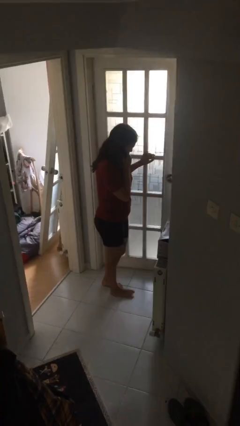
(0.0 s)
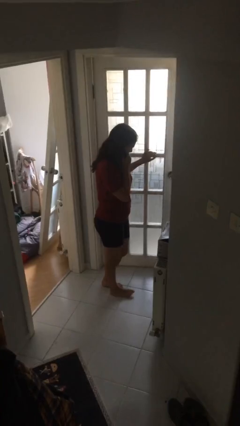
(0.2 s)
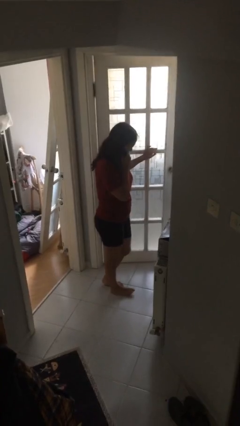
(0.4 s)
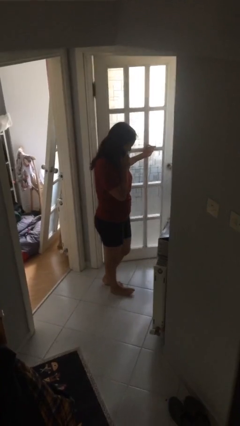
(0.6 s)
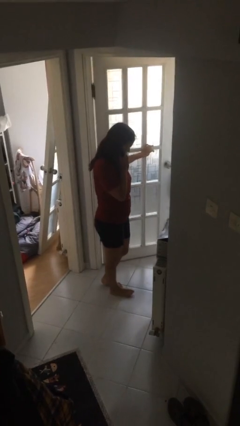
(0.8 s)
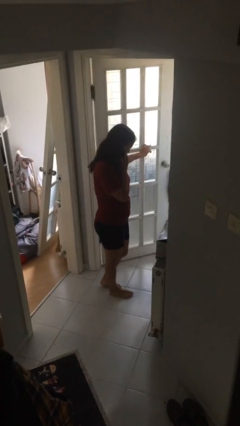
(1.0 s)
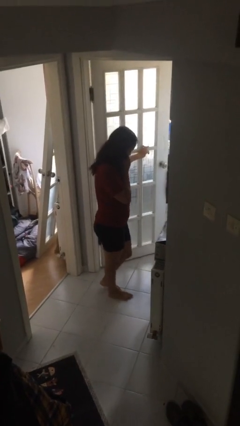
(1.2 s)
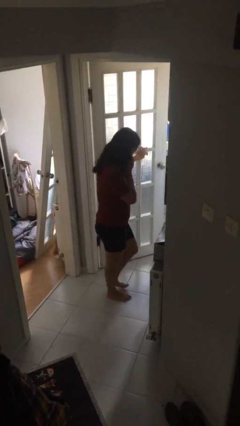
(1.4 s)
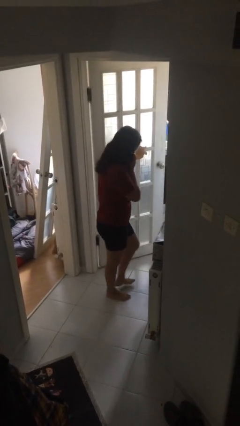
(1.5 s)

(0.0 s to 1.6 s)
person opens facility door

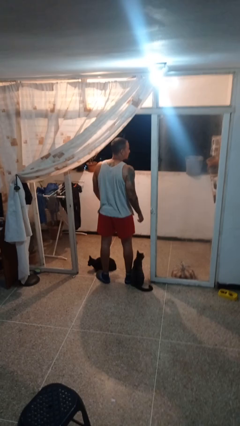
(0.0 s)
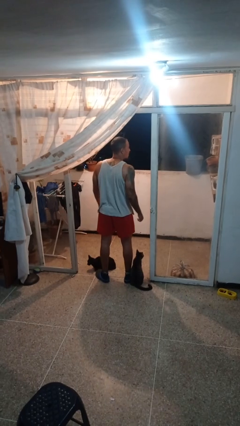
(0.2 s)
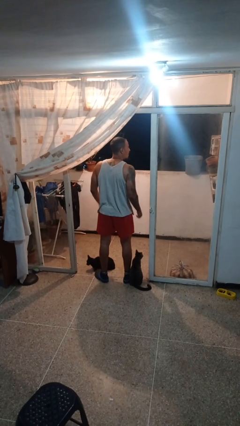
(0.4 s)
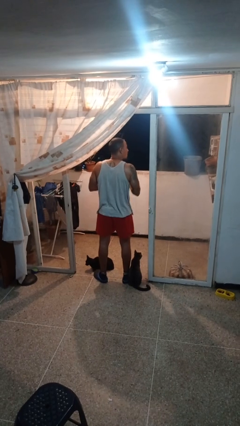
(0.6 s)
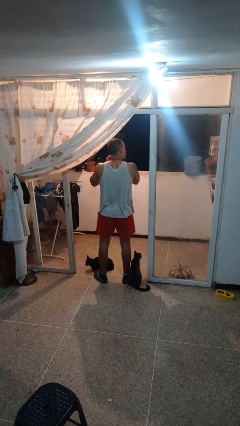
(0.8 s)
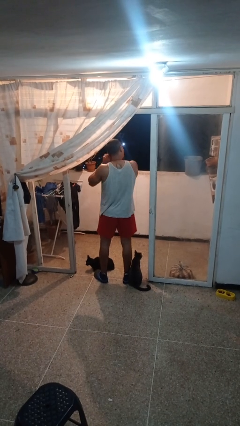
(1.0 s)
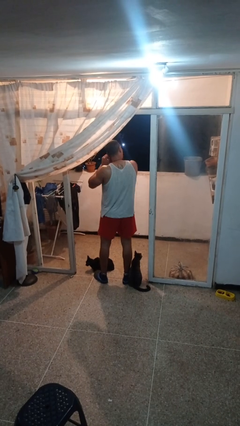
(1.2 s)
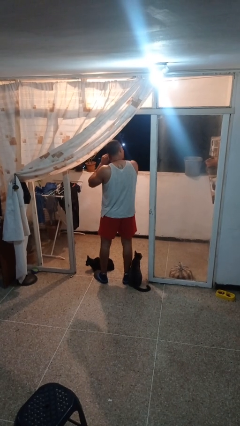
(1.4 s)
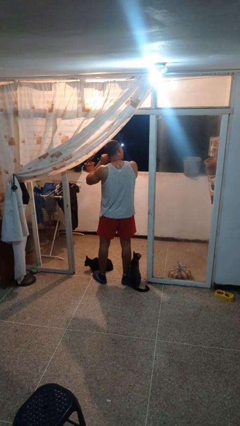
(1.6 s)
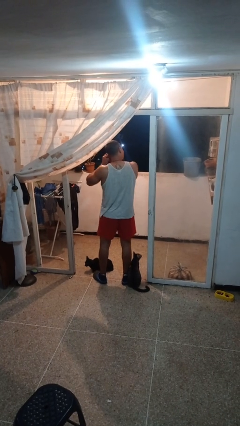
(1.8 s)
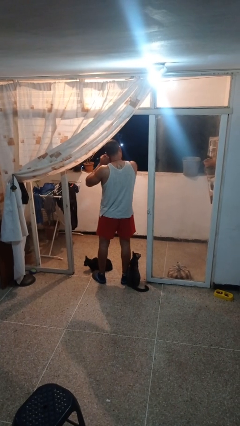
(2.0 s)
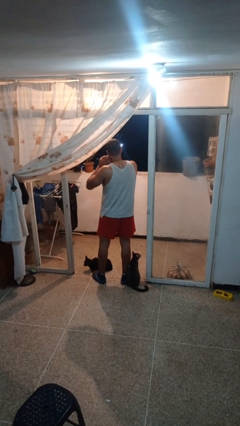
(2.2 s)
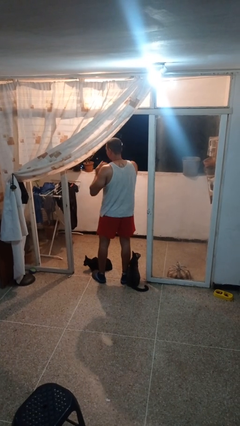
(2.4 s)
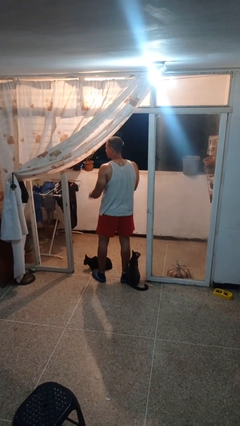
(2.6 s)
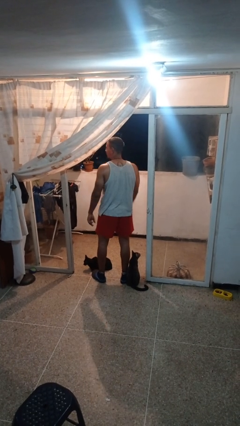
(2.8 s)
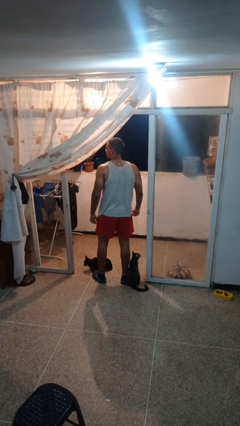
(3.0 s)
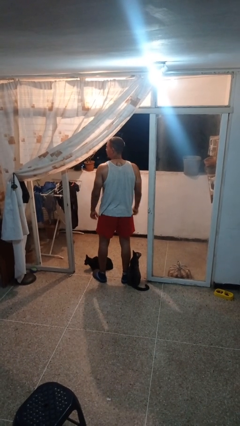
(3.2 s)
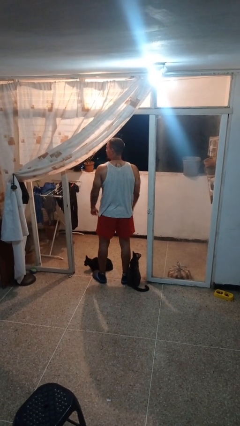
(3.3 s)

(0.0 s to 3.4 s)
person puts on earrings

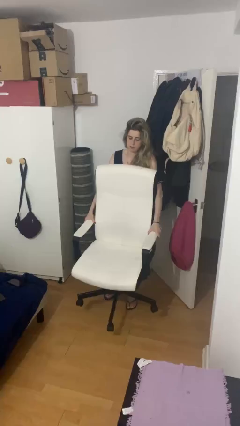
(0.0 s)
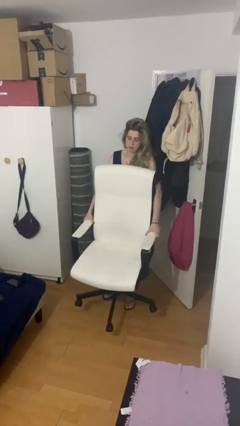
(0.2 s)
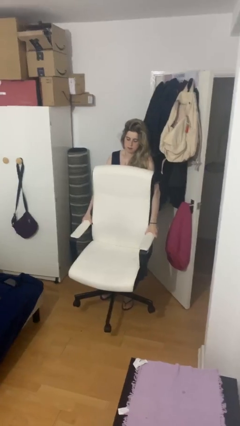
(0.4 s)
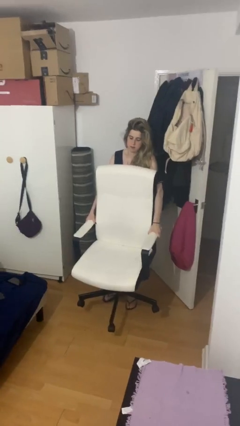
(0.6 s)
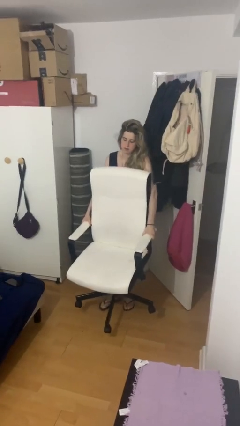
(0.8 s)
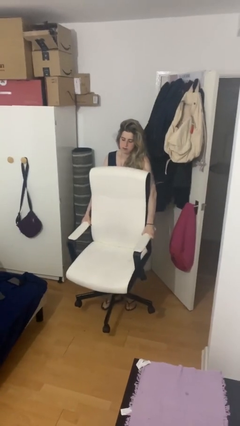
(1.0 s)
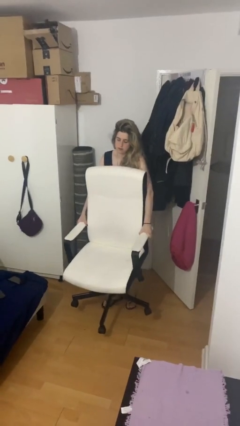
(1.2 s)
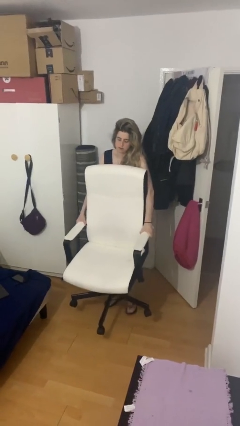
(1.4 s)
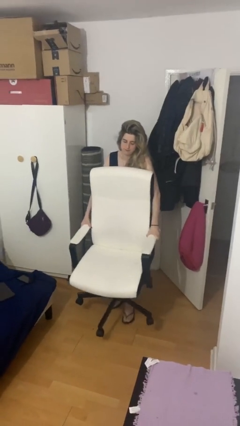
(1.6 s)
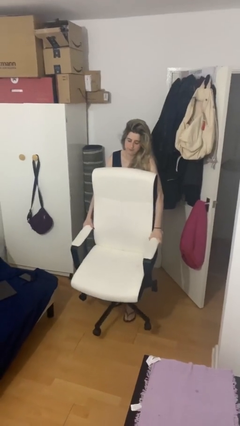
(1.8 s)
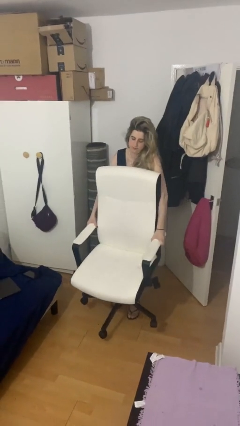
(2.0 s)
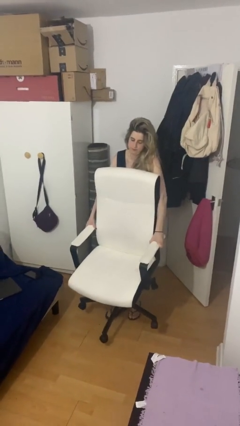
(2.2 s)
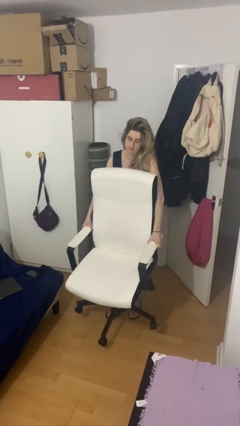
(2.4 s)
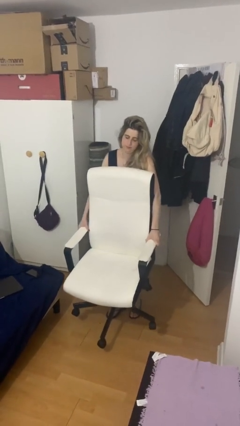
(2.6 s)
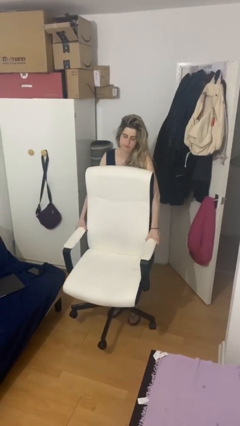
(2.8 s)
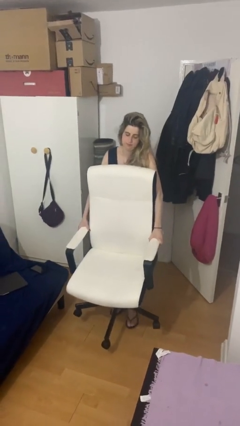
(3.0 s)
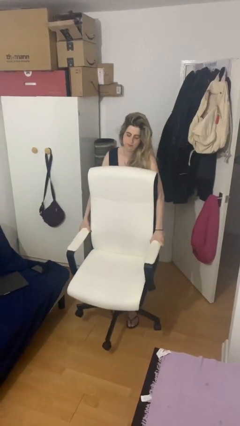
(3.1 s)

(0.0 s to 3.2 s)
person carries heavy object

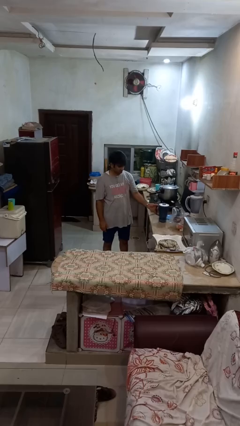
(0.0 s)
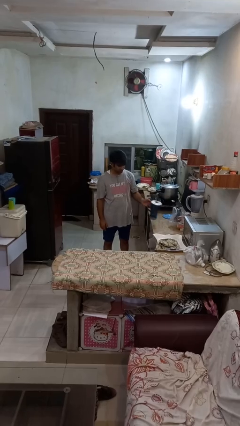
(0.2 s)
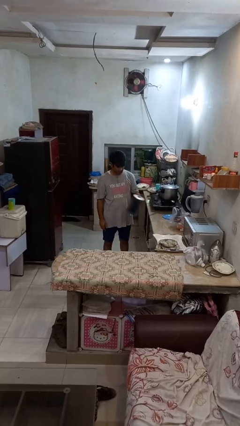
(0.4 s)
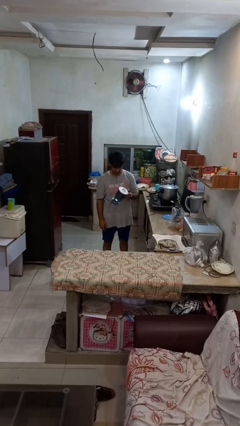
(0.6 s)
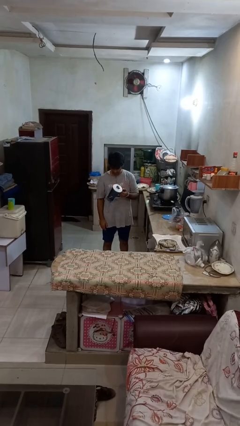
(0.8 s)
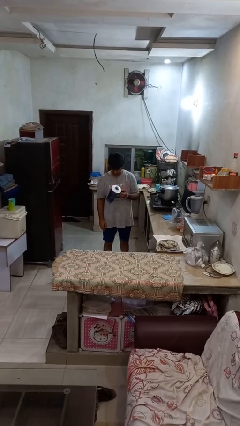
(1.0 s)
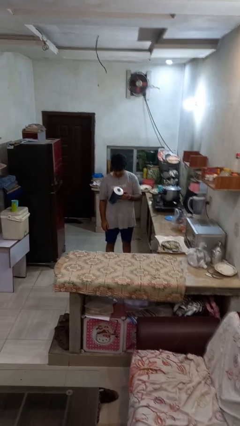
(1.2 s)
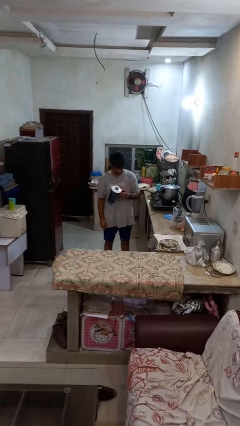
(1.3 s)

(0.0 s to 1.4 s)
person picks up object from countertop

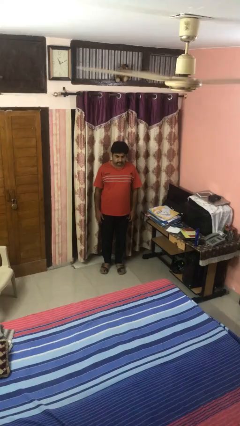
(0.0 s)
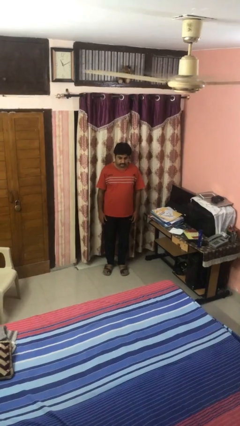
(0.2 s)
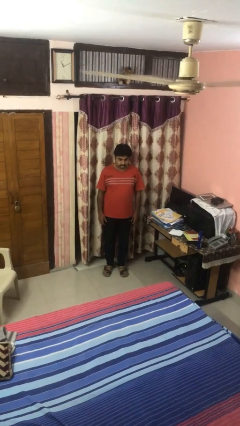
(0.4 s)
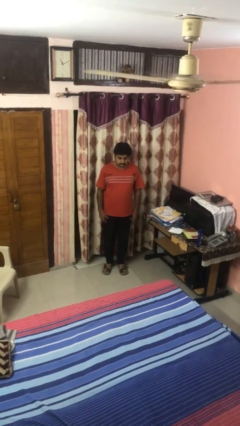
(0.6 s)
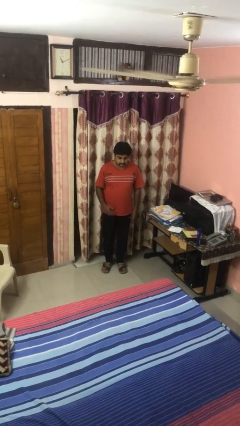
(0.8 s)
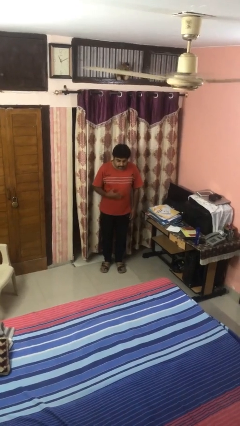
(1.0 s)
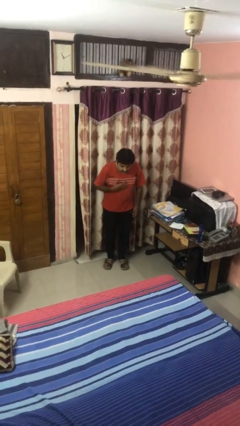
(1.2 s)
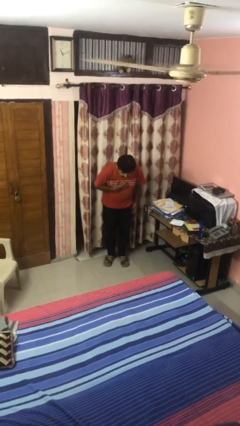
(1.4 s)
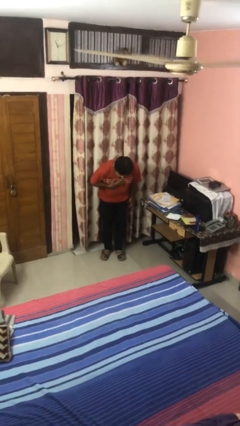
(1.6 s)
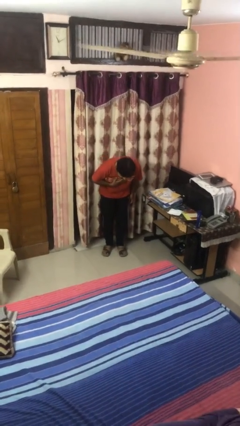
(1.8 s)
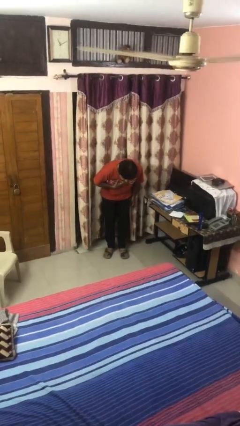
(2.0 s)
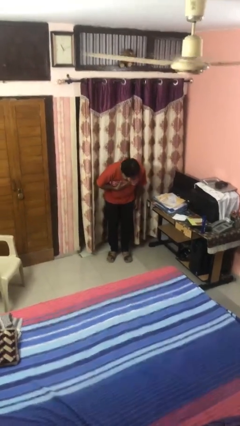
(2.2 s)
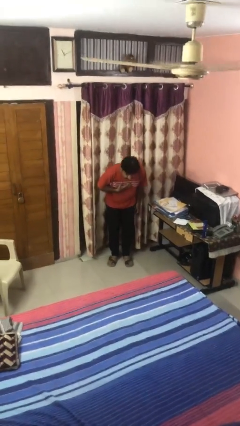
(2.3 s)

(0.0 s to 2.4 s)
person bows

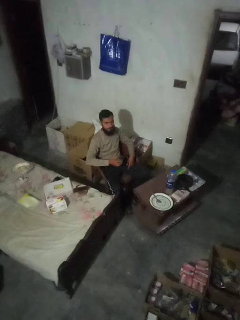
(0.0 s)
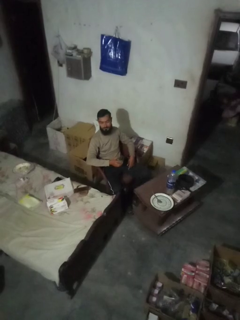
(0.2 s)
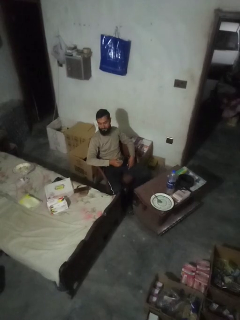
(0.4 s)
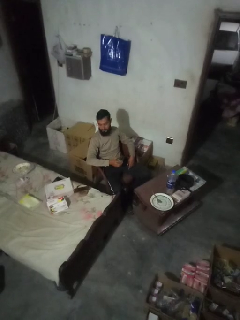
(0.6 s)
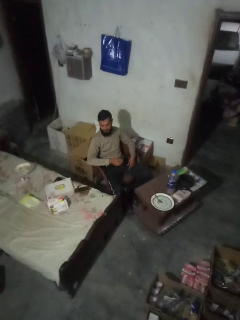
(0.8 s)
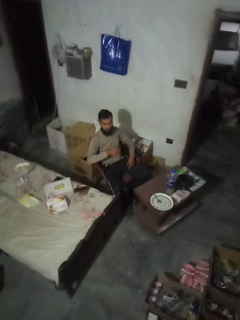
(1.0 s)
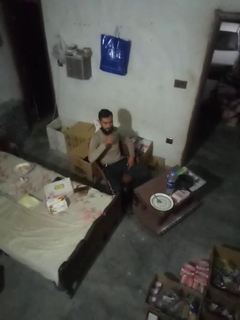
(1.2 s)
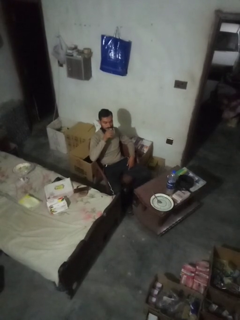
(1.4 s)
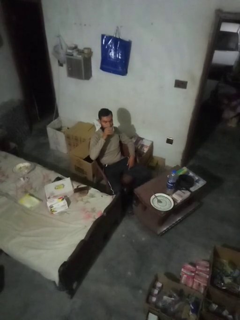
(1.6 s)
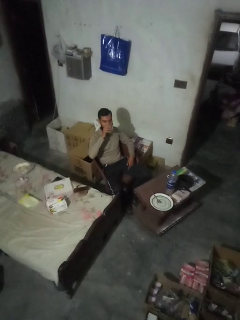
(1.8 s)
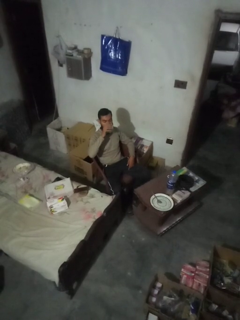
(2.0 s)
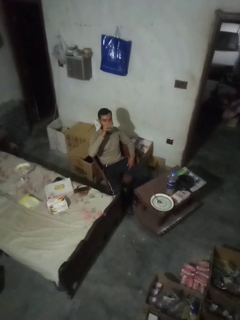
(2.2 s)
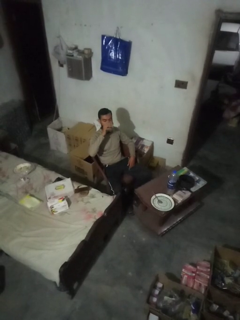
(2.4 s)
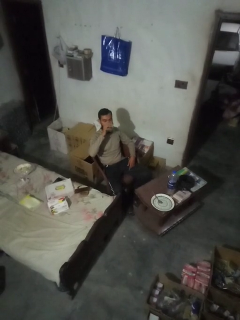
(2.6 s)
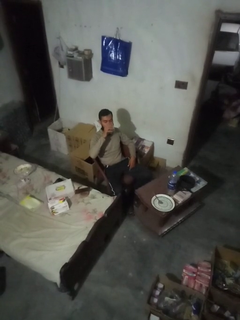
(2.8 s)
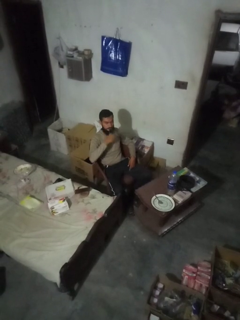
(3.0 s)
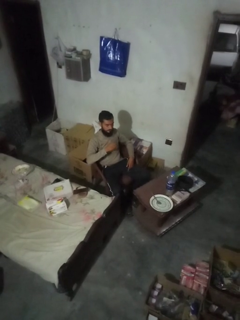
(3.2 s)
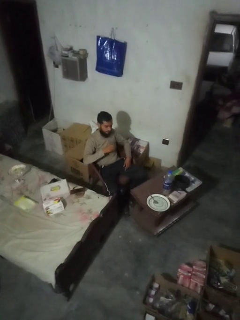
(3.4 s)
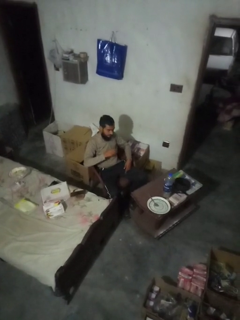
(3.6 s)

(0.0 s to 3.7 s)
person drinks from shotglass

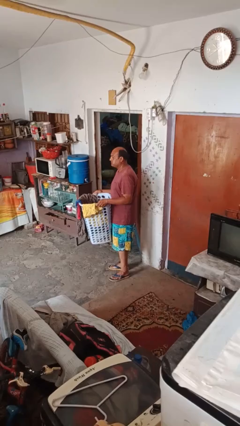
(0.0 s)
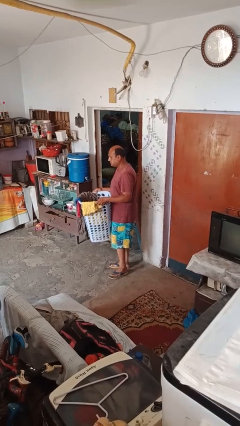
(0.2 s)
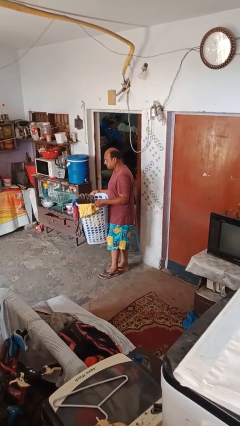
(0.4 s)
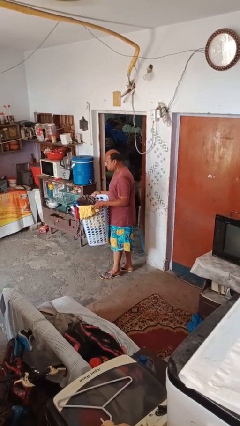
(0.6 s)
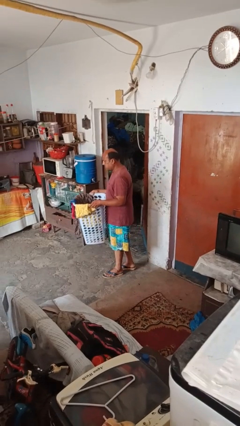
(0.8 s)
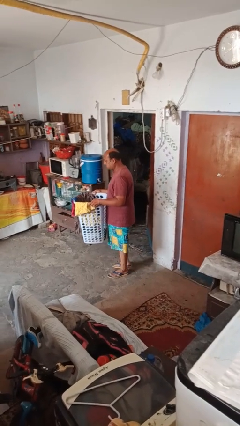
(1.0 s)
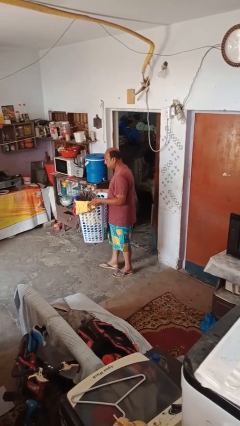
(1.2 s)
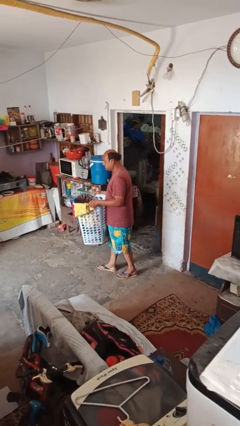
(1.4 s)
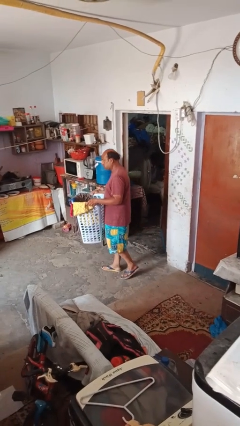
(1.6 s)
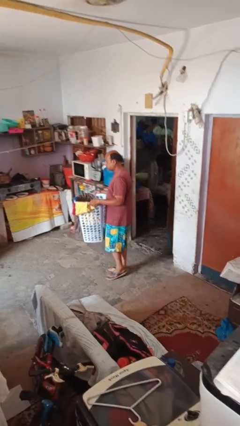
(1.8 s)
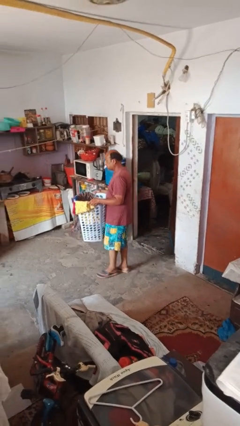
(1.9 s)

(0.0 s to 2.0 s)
person carries laundry basket

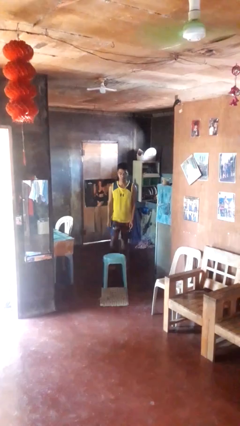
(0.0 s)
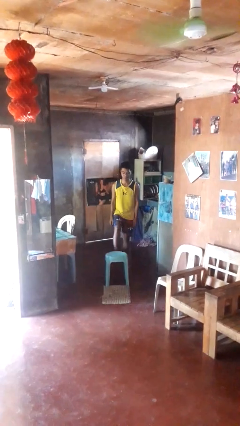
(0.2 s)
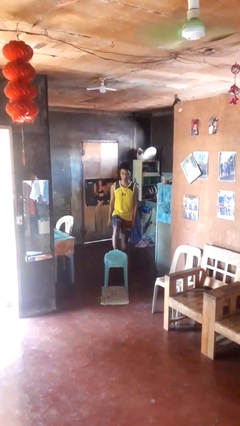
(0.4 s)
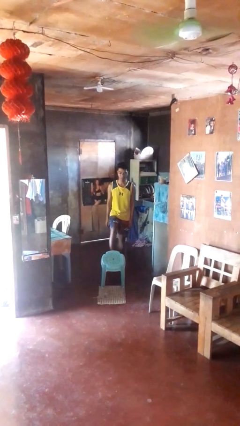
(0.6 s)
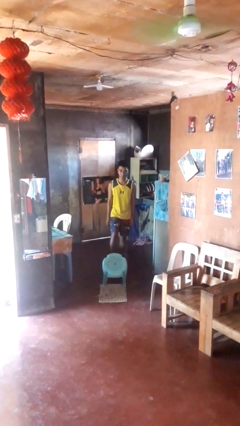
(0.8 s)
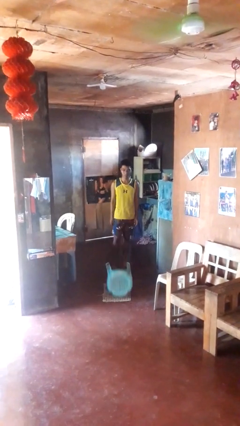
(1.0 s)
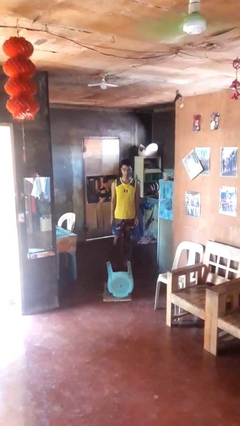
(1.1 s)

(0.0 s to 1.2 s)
person knocks over furniture
